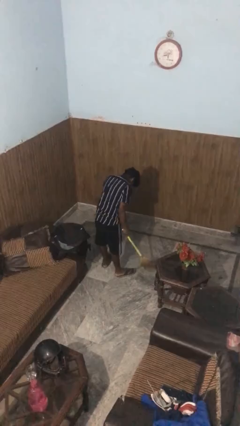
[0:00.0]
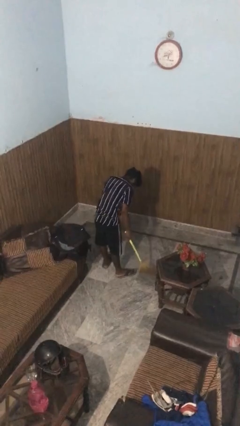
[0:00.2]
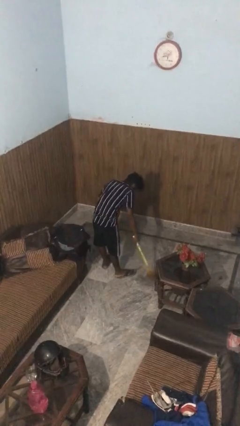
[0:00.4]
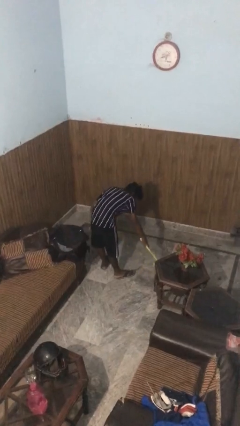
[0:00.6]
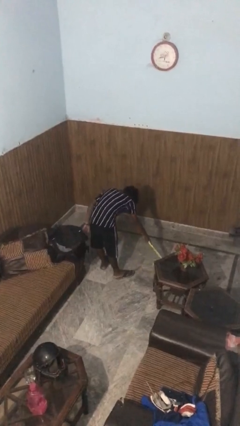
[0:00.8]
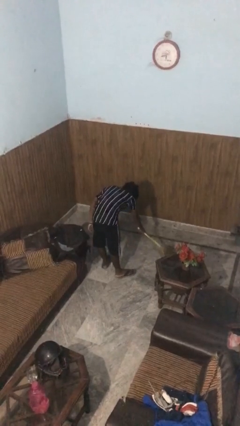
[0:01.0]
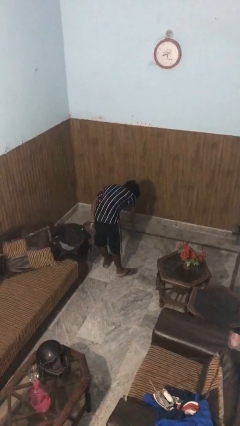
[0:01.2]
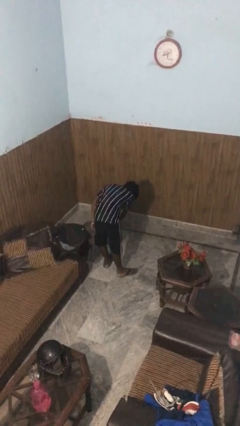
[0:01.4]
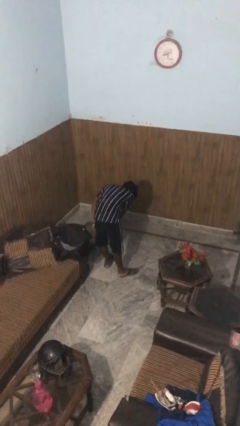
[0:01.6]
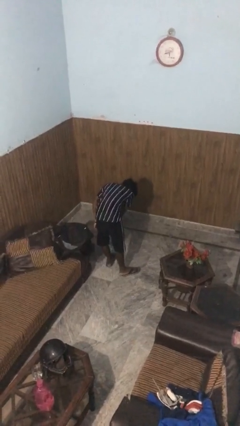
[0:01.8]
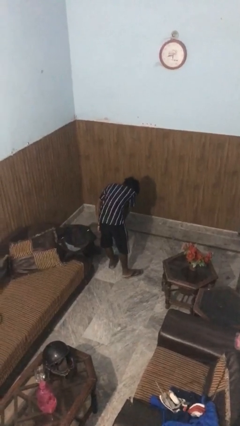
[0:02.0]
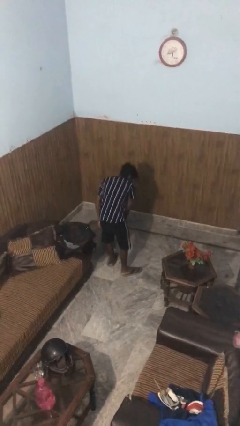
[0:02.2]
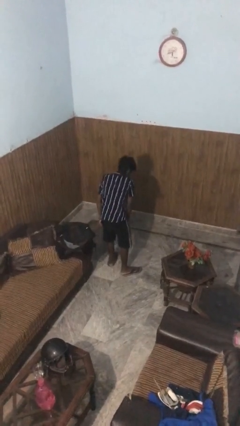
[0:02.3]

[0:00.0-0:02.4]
person sweeps floor

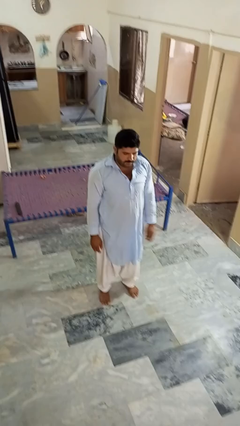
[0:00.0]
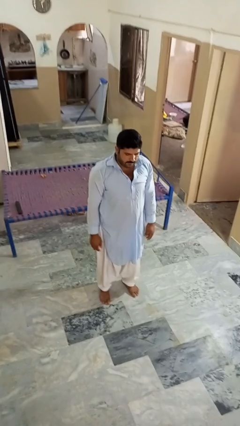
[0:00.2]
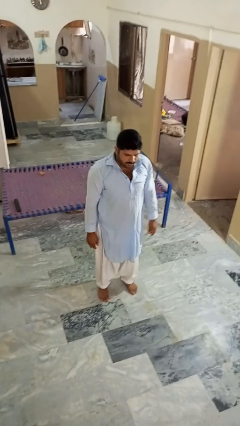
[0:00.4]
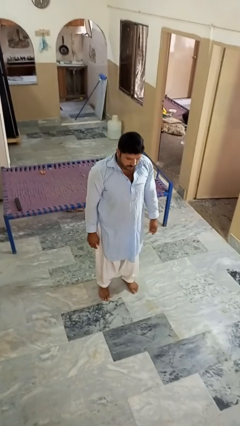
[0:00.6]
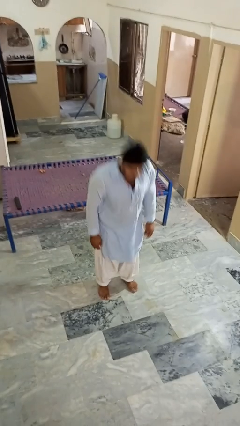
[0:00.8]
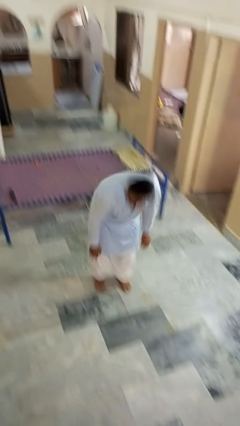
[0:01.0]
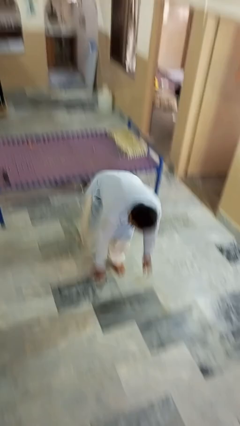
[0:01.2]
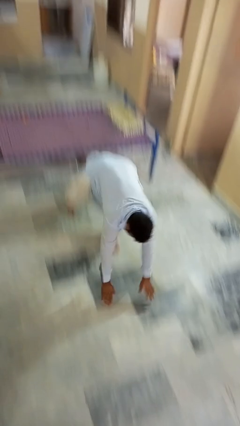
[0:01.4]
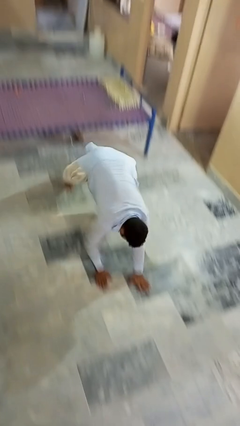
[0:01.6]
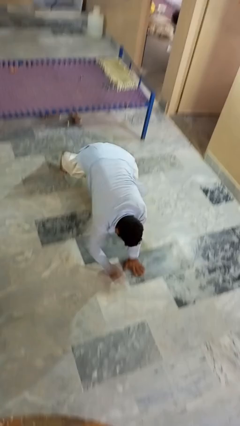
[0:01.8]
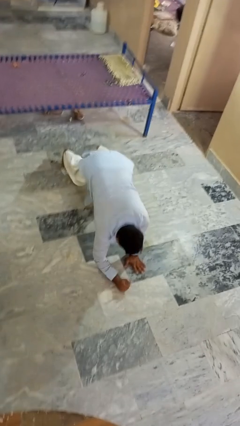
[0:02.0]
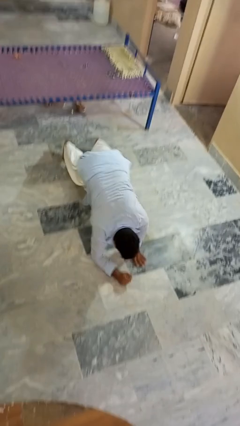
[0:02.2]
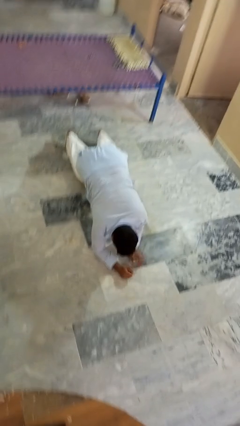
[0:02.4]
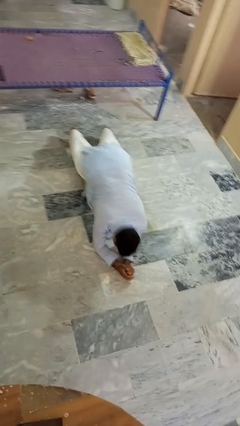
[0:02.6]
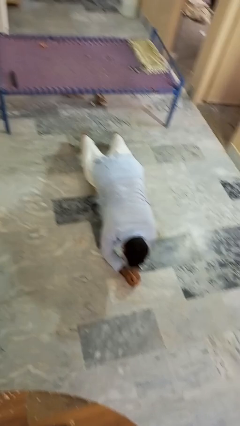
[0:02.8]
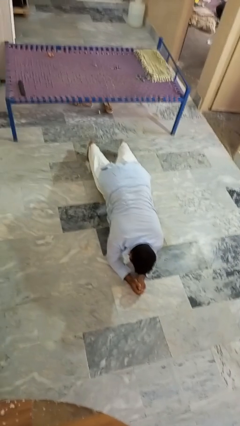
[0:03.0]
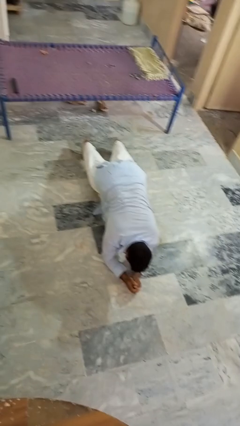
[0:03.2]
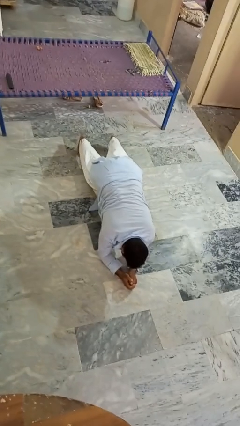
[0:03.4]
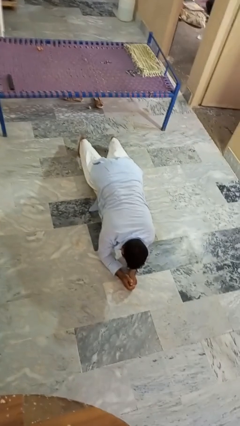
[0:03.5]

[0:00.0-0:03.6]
person exercises with plank

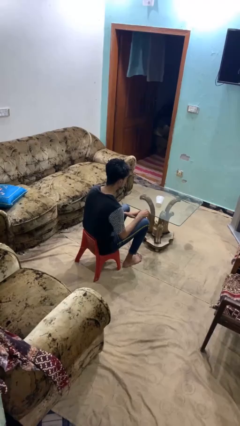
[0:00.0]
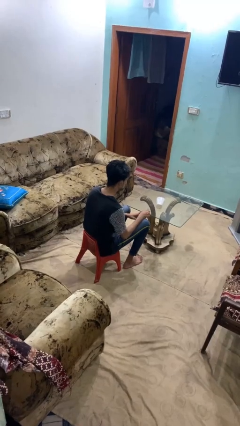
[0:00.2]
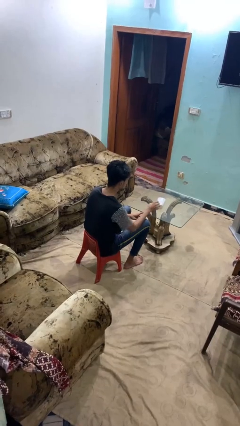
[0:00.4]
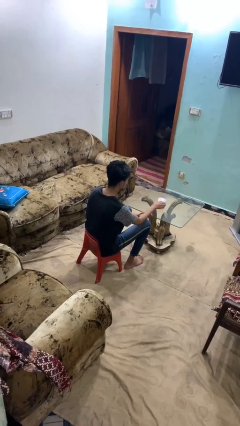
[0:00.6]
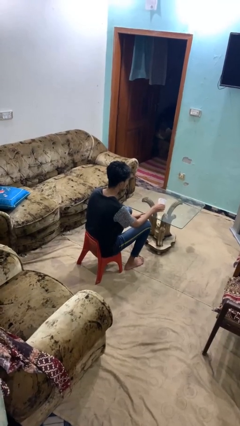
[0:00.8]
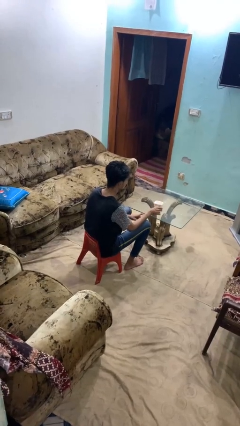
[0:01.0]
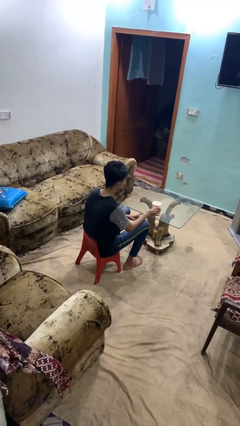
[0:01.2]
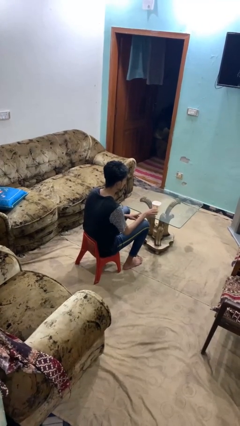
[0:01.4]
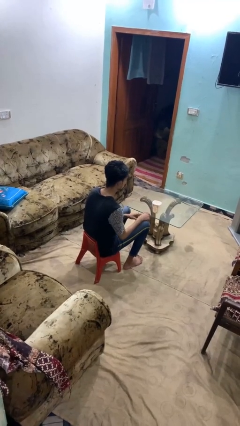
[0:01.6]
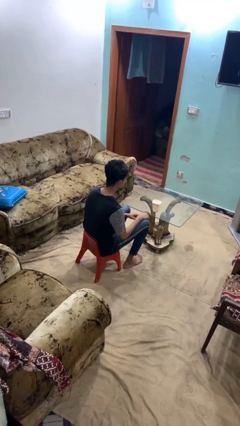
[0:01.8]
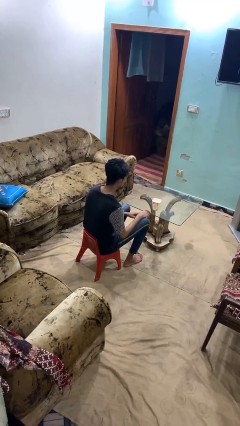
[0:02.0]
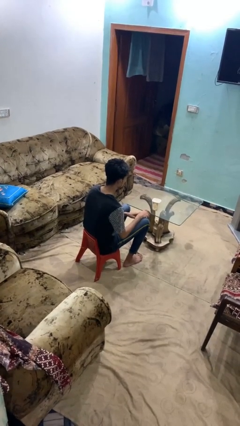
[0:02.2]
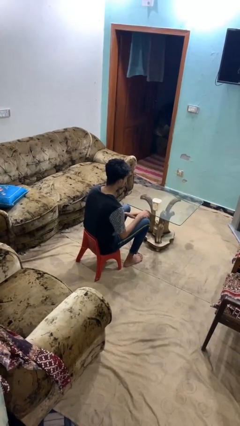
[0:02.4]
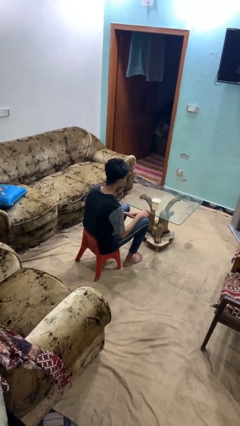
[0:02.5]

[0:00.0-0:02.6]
person sets upright glass

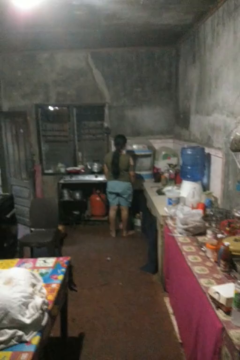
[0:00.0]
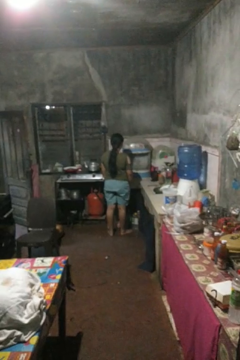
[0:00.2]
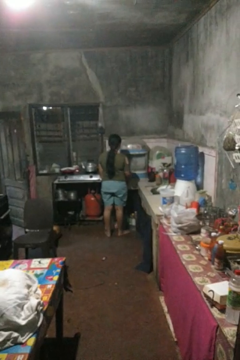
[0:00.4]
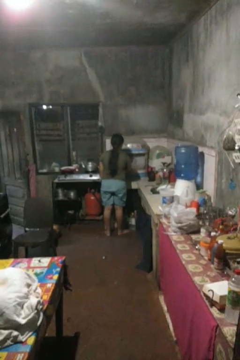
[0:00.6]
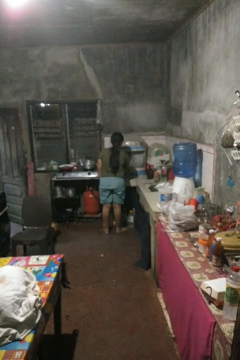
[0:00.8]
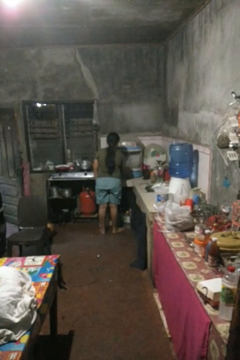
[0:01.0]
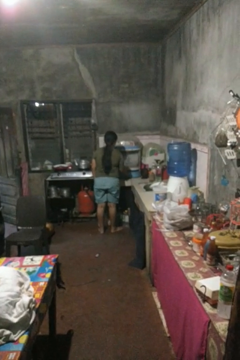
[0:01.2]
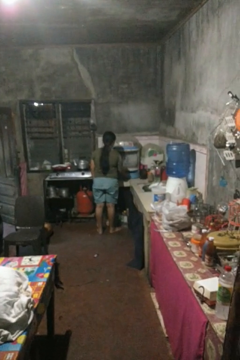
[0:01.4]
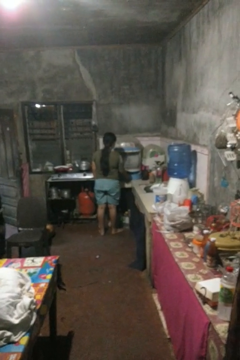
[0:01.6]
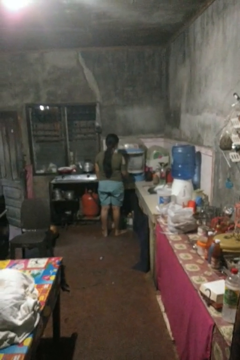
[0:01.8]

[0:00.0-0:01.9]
person opens kitchen drawer

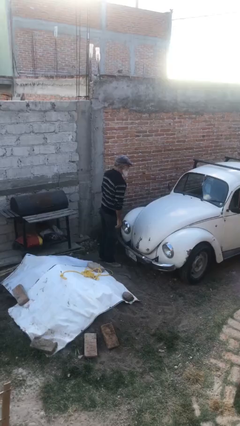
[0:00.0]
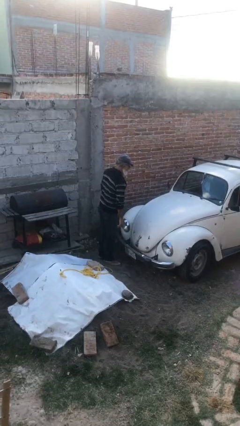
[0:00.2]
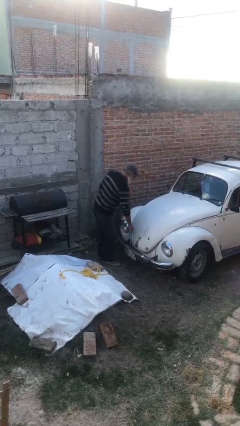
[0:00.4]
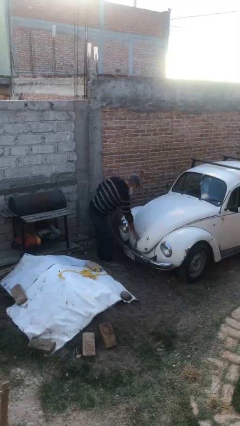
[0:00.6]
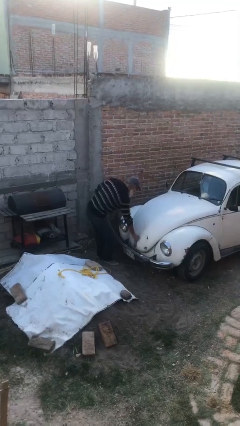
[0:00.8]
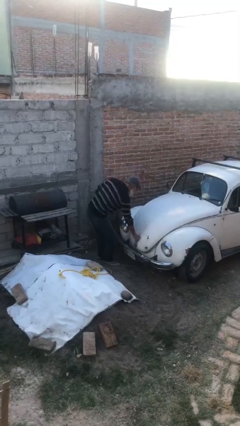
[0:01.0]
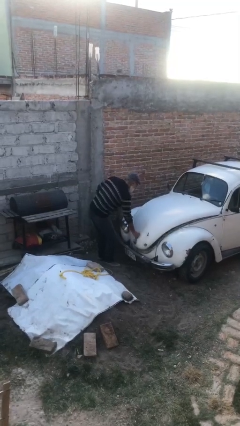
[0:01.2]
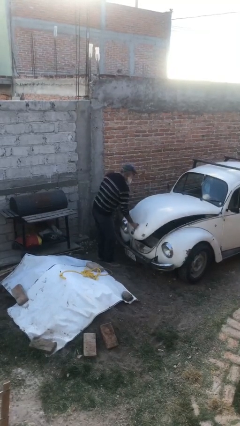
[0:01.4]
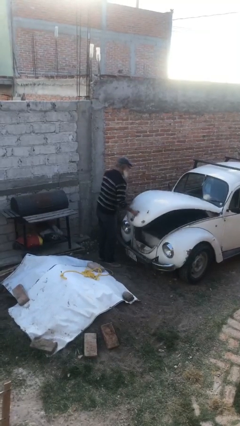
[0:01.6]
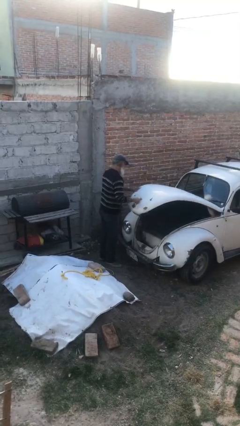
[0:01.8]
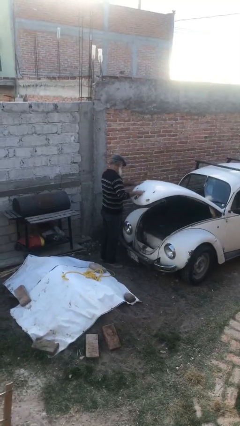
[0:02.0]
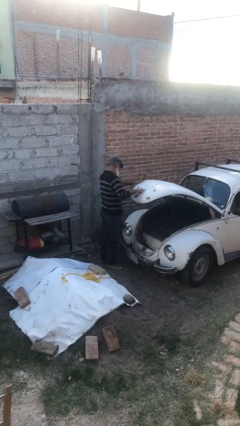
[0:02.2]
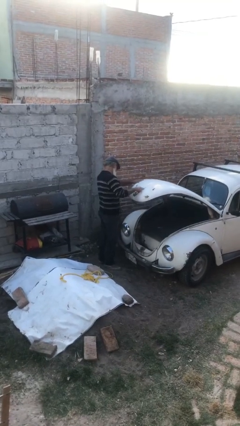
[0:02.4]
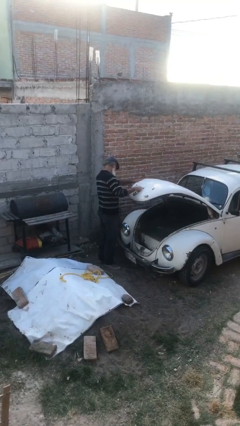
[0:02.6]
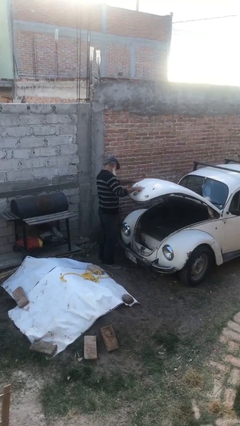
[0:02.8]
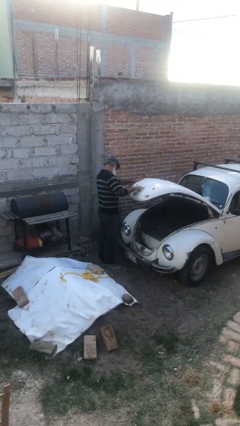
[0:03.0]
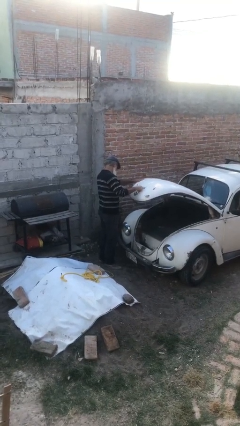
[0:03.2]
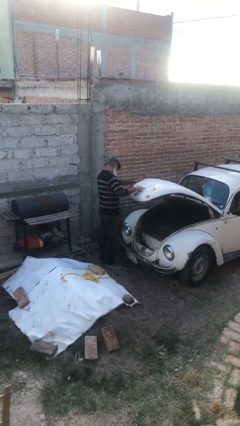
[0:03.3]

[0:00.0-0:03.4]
person opens car trunk

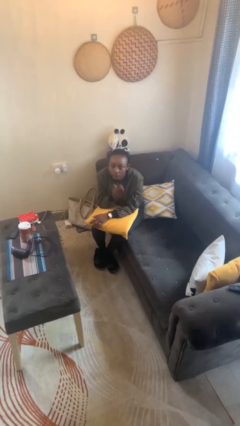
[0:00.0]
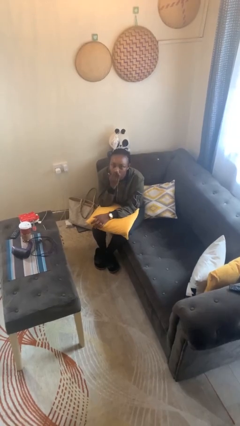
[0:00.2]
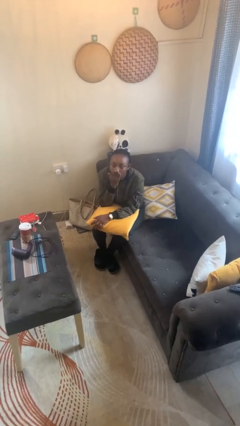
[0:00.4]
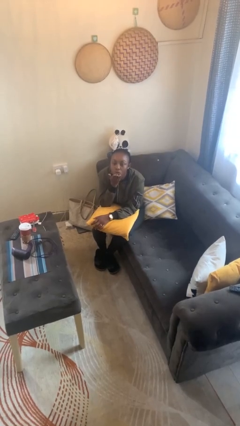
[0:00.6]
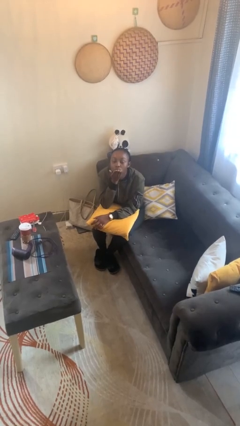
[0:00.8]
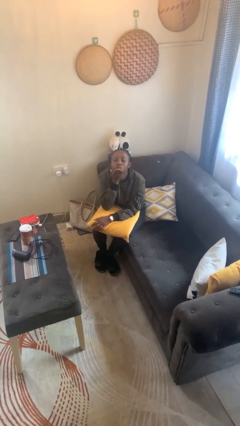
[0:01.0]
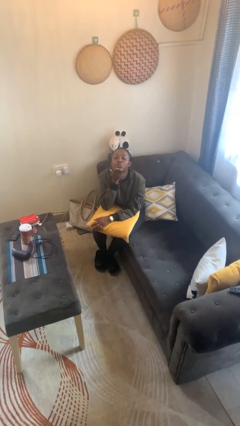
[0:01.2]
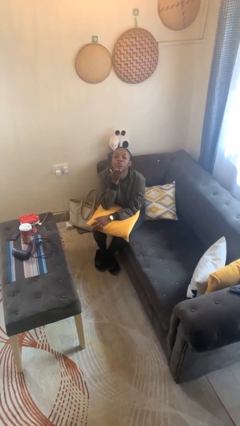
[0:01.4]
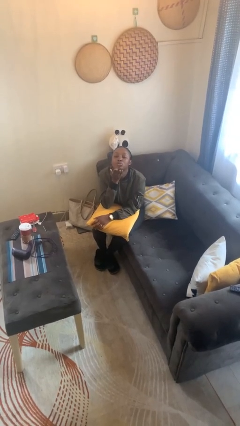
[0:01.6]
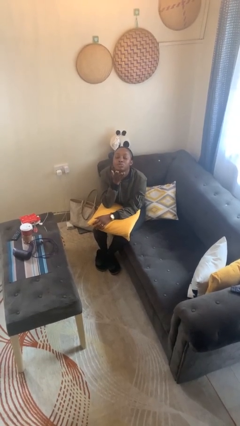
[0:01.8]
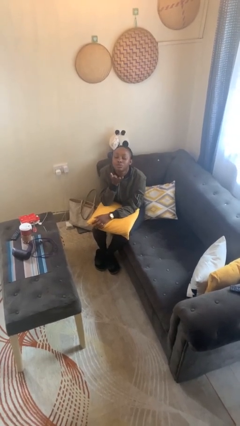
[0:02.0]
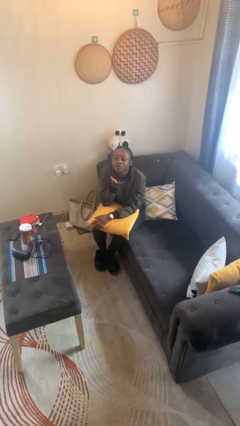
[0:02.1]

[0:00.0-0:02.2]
person gestures blow kiss

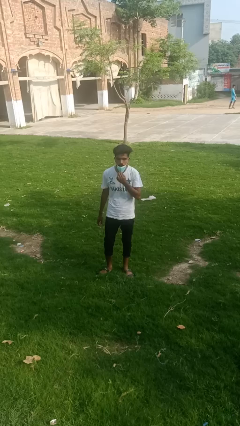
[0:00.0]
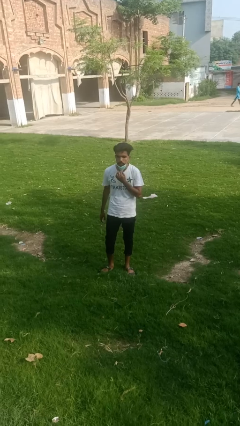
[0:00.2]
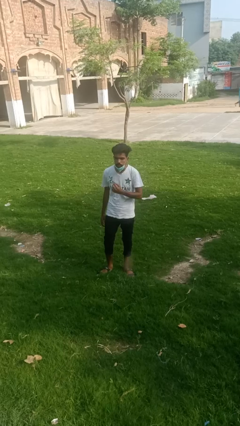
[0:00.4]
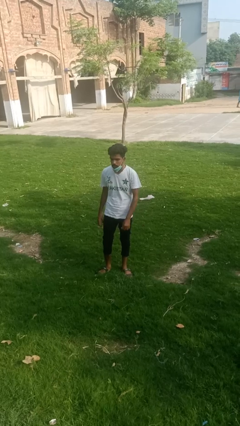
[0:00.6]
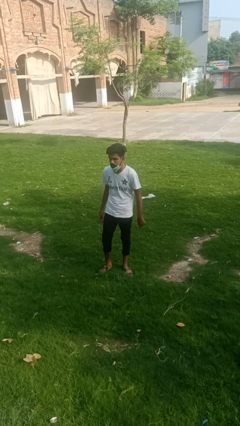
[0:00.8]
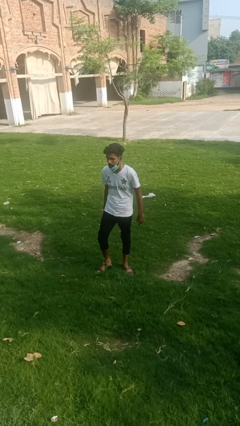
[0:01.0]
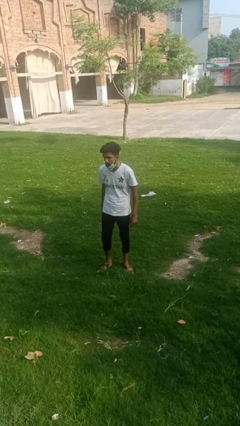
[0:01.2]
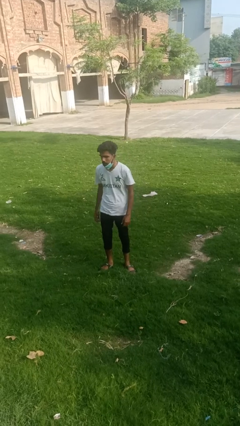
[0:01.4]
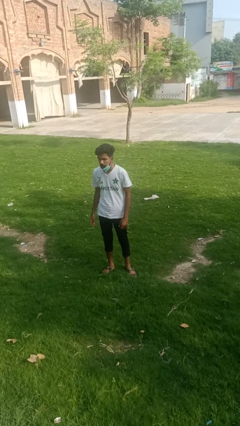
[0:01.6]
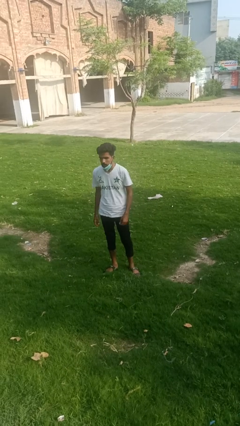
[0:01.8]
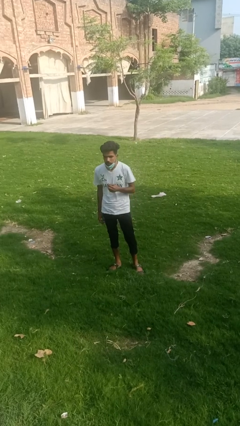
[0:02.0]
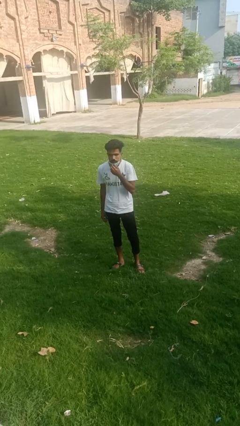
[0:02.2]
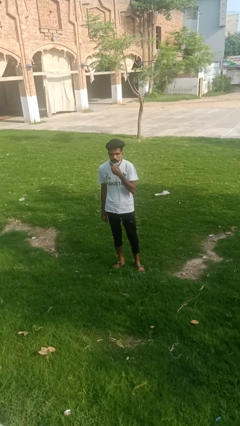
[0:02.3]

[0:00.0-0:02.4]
person takes off facemask
